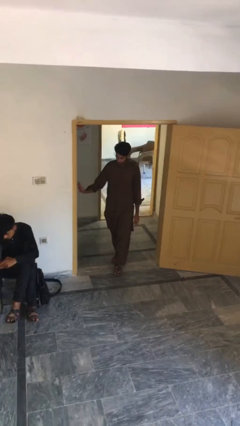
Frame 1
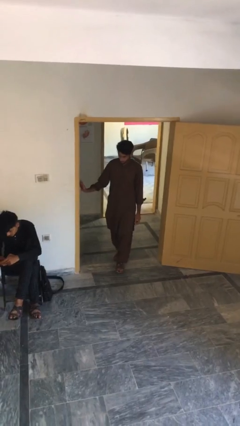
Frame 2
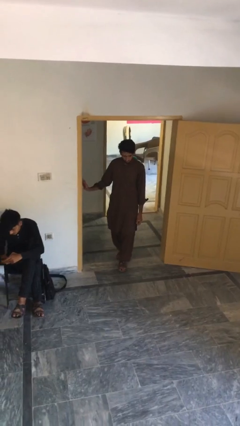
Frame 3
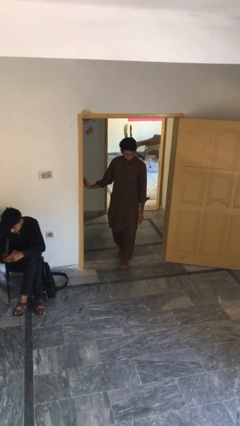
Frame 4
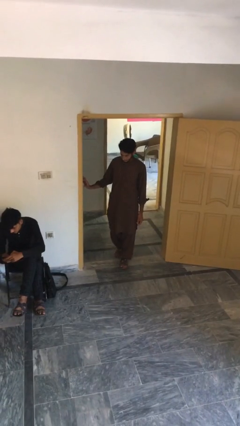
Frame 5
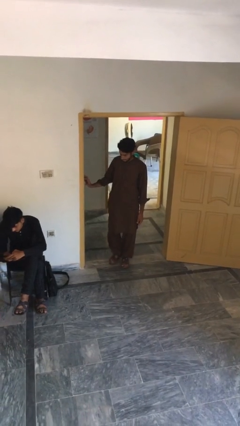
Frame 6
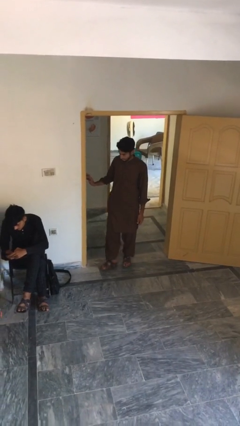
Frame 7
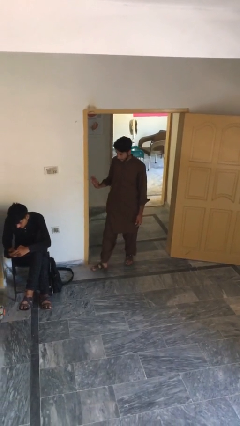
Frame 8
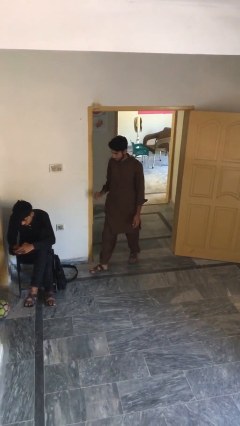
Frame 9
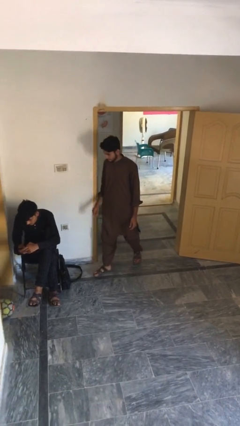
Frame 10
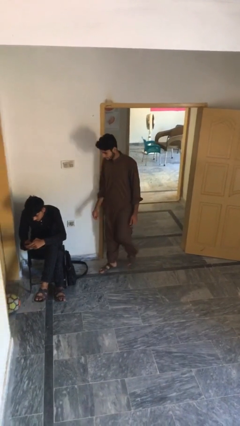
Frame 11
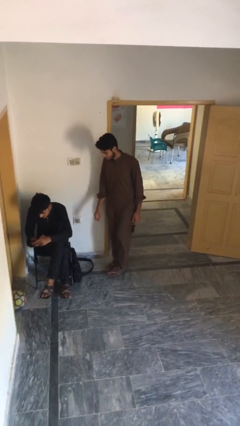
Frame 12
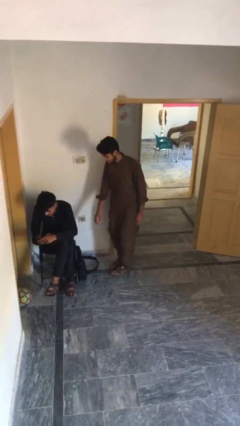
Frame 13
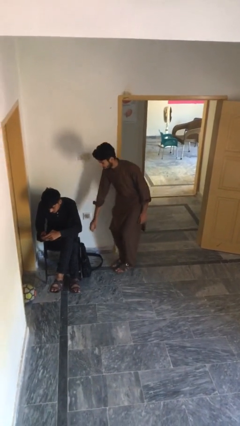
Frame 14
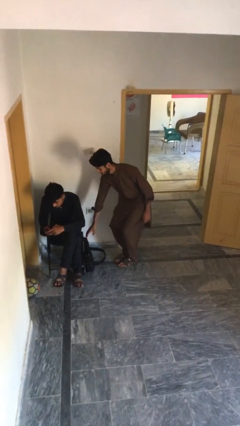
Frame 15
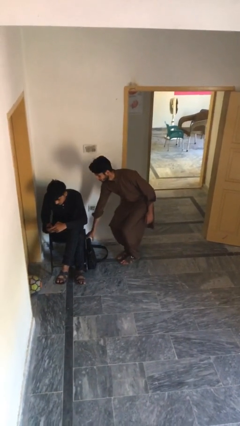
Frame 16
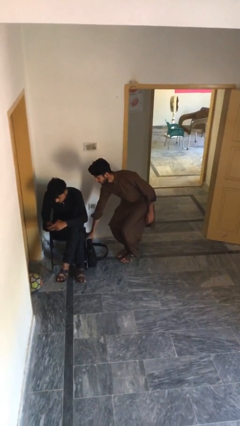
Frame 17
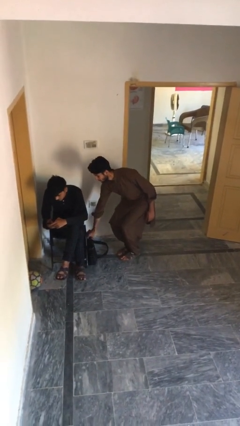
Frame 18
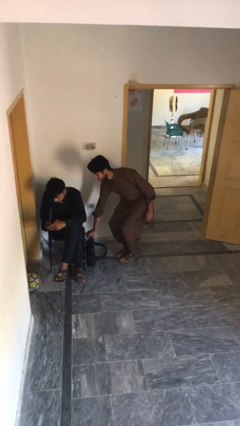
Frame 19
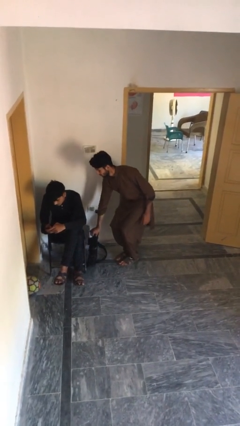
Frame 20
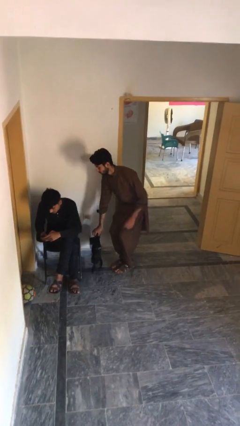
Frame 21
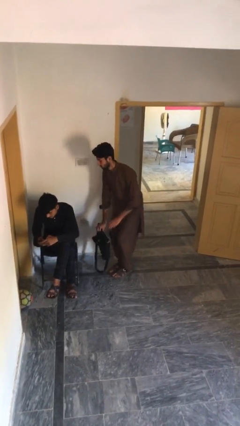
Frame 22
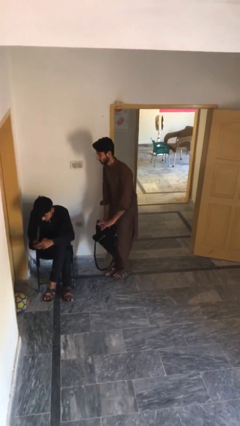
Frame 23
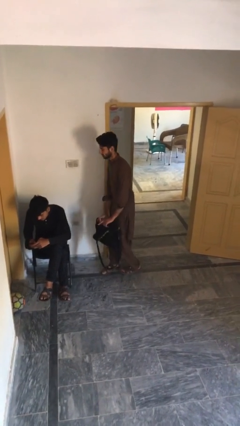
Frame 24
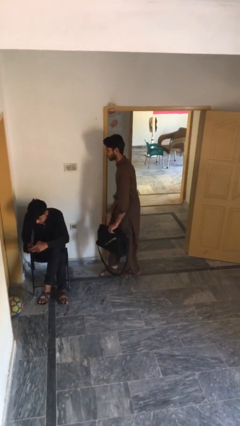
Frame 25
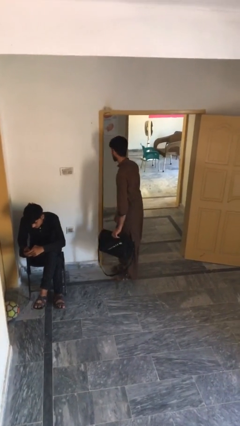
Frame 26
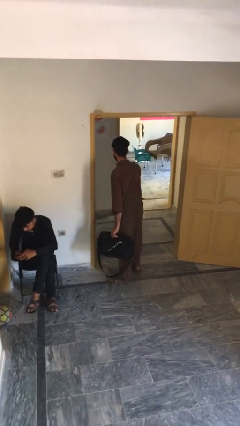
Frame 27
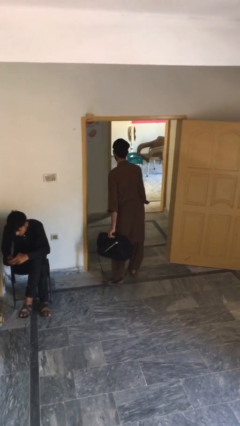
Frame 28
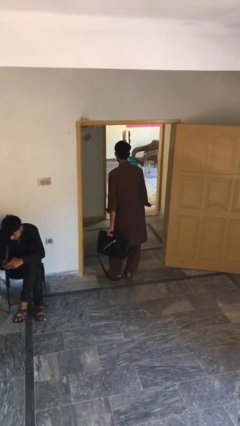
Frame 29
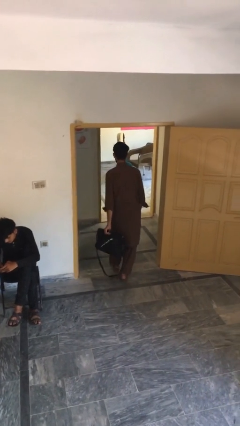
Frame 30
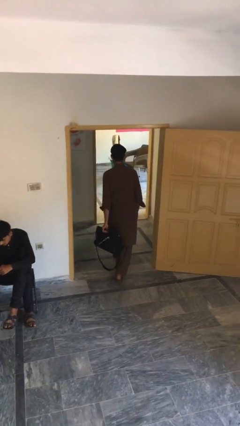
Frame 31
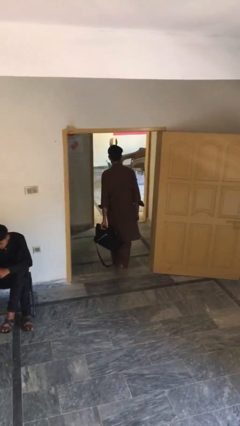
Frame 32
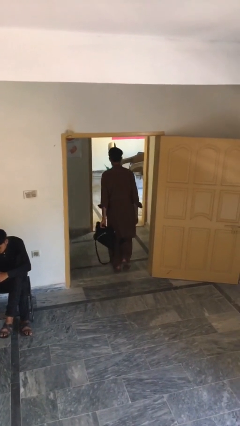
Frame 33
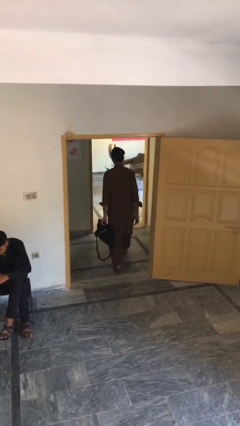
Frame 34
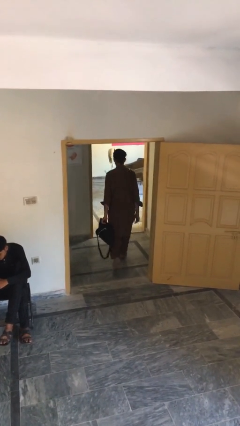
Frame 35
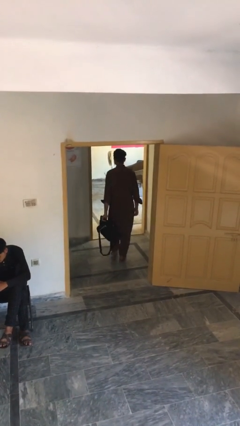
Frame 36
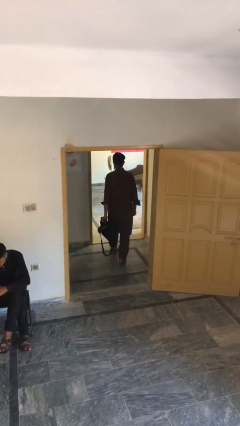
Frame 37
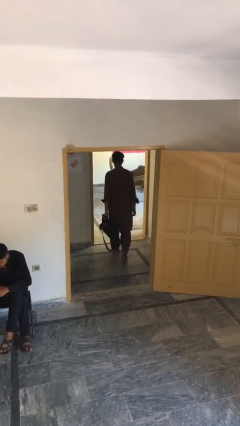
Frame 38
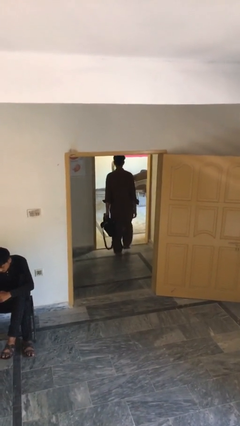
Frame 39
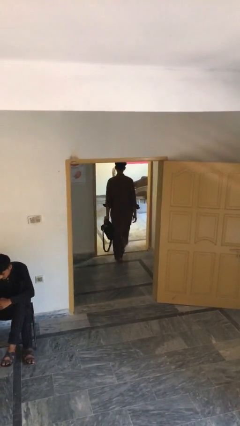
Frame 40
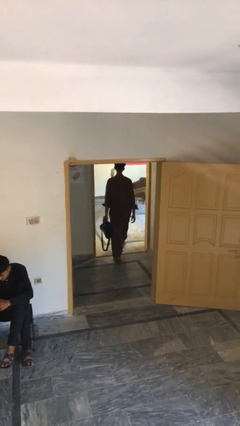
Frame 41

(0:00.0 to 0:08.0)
person steals object from person

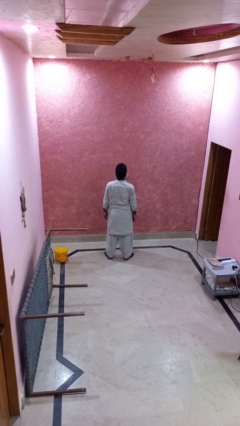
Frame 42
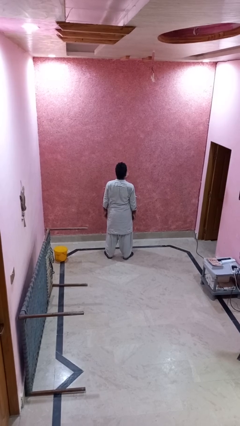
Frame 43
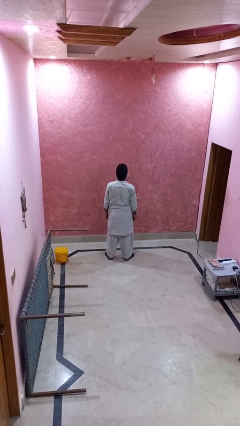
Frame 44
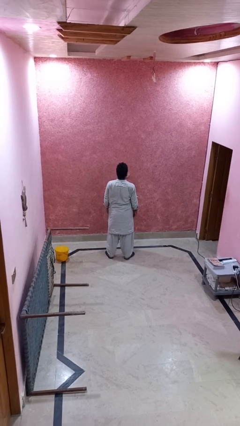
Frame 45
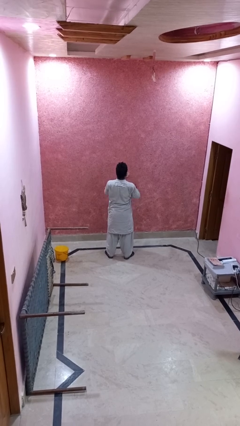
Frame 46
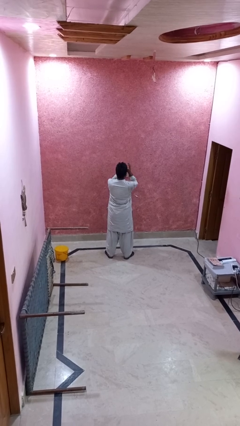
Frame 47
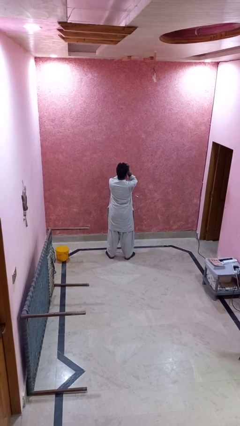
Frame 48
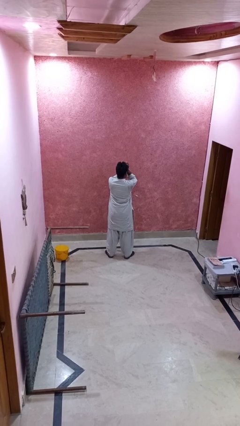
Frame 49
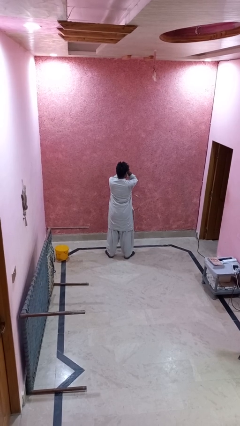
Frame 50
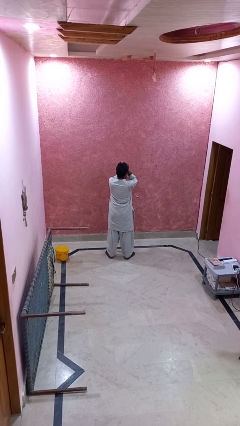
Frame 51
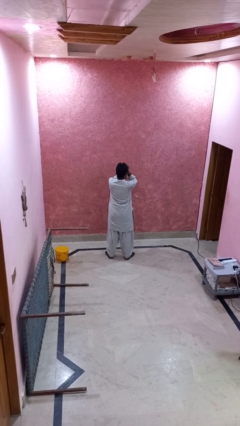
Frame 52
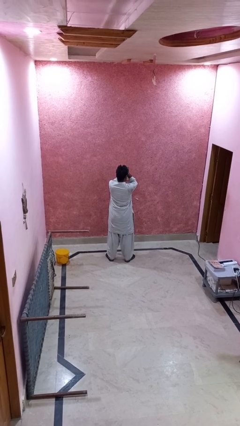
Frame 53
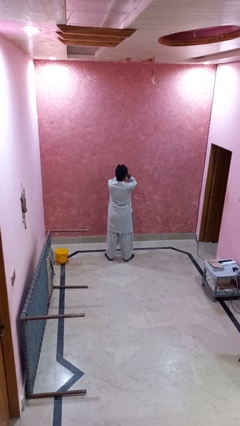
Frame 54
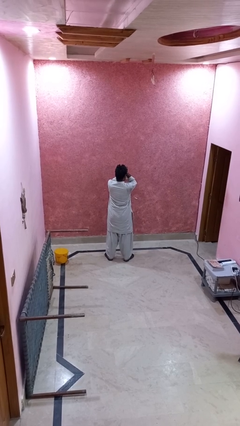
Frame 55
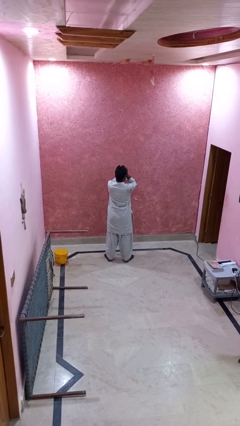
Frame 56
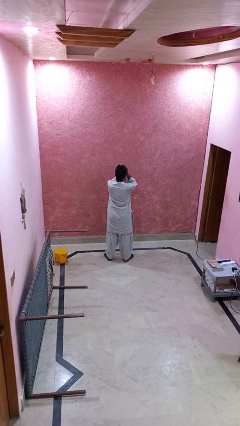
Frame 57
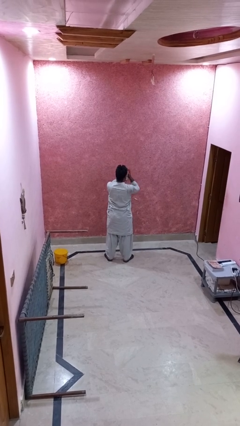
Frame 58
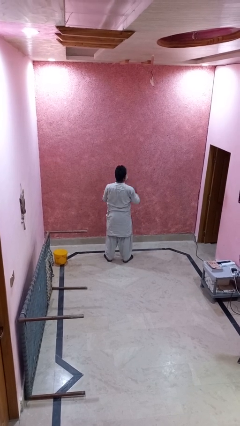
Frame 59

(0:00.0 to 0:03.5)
person rubs eyes

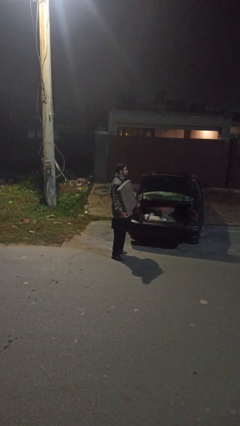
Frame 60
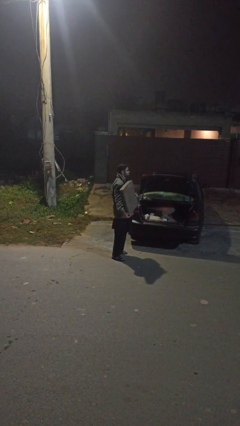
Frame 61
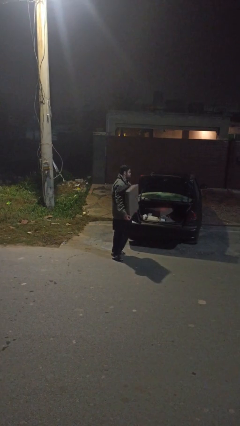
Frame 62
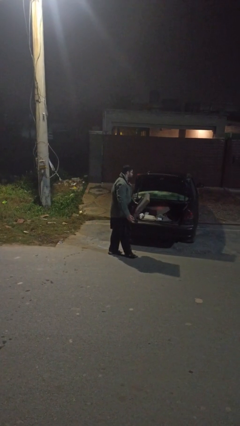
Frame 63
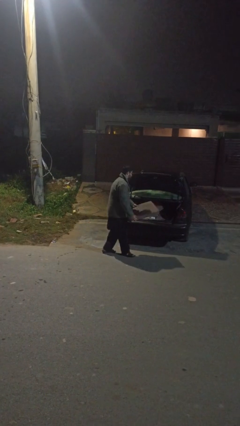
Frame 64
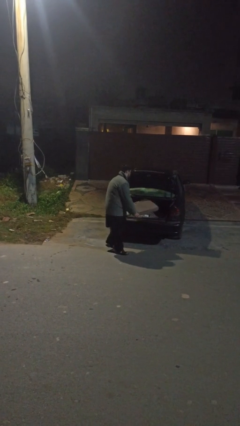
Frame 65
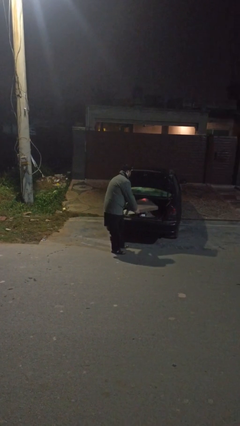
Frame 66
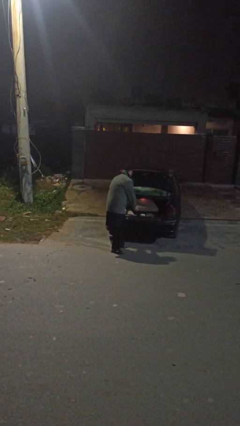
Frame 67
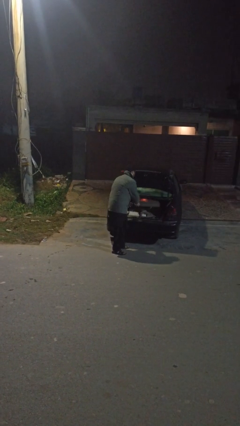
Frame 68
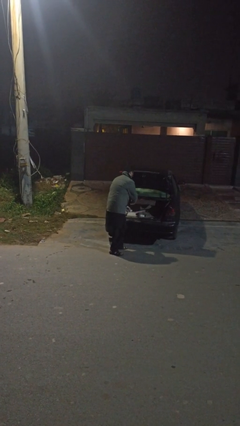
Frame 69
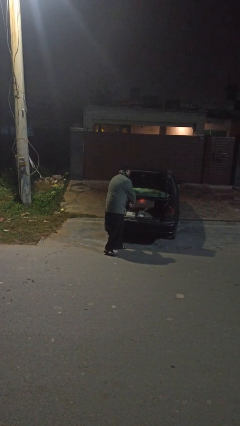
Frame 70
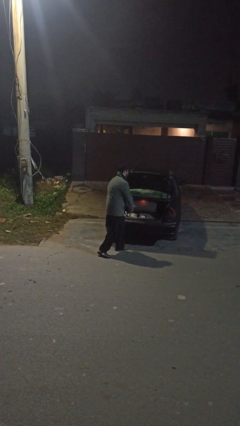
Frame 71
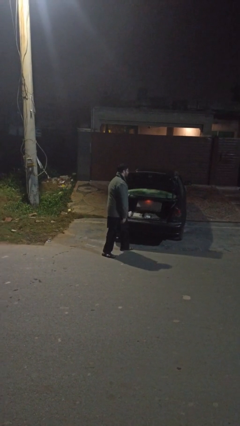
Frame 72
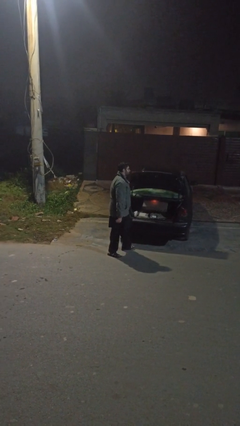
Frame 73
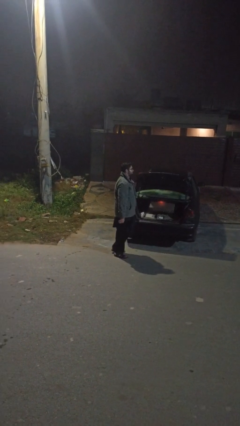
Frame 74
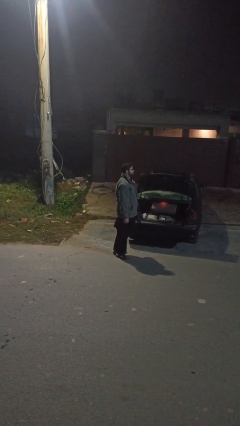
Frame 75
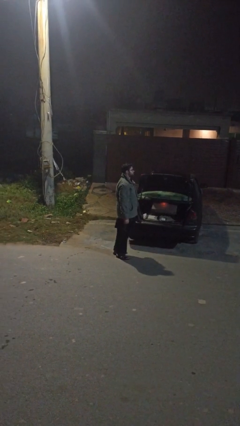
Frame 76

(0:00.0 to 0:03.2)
person loads car

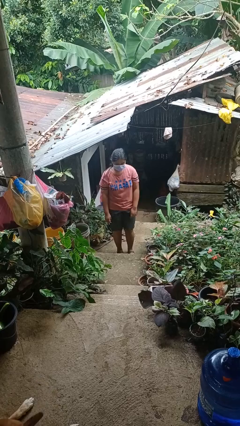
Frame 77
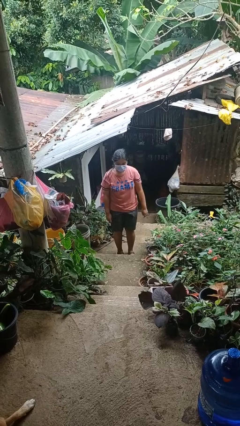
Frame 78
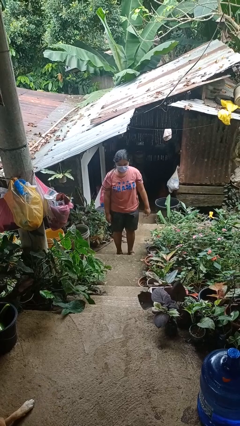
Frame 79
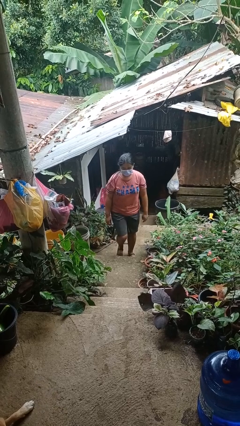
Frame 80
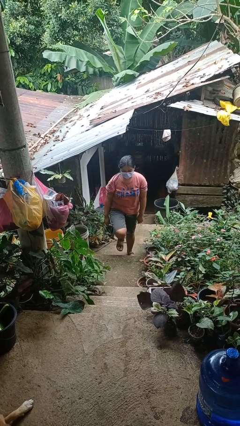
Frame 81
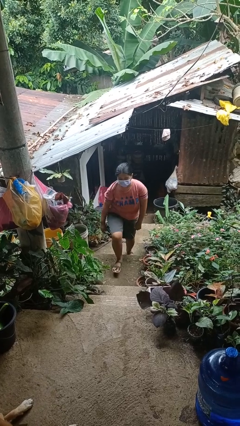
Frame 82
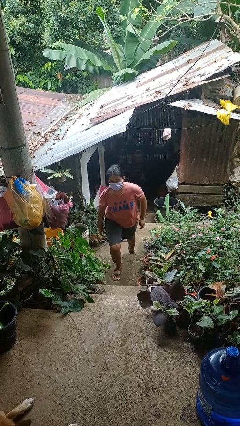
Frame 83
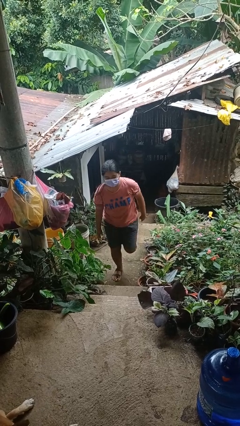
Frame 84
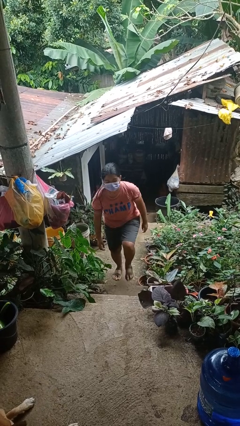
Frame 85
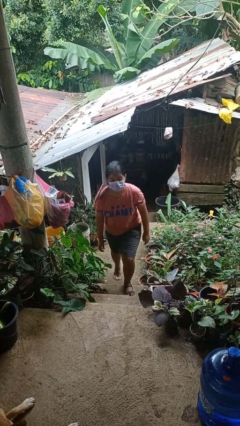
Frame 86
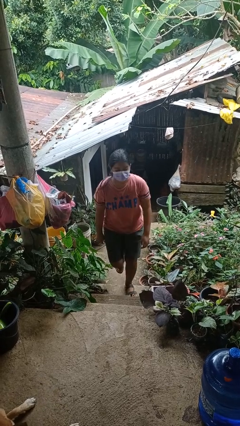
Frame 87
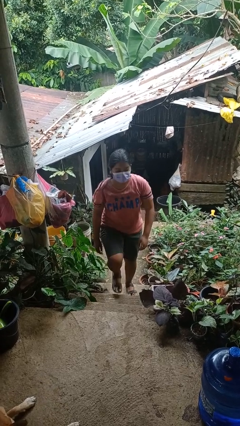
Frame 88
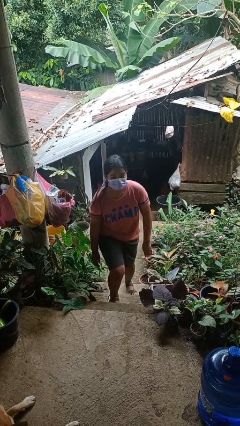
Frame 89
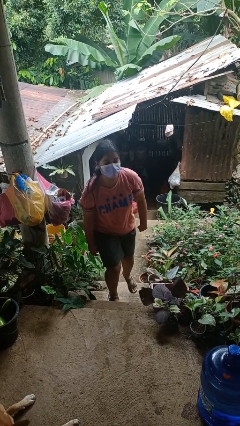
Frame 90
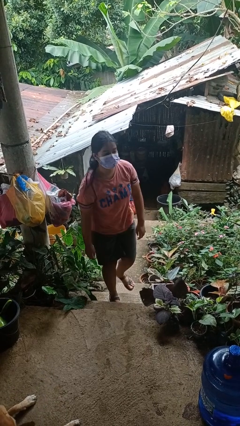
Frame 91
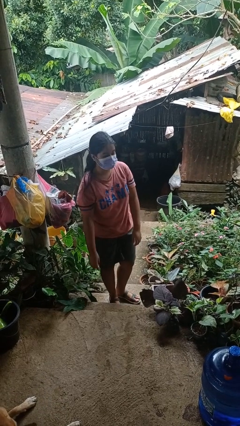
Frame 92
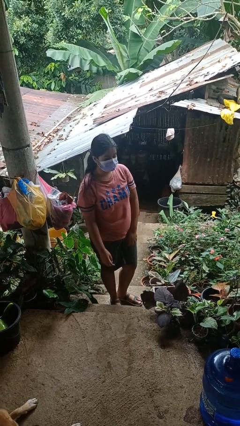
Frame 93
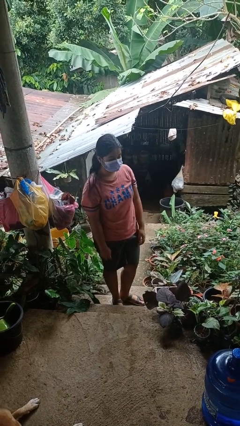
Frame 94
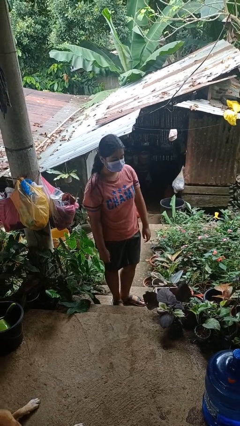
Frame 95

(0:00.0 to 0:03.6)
person climbs up stairs
